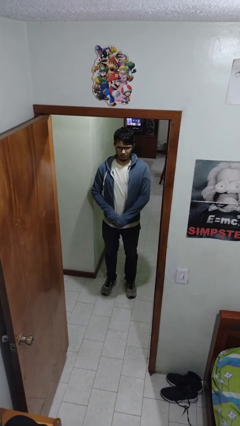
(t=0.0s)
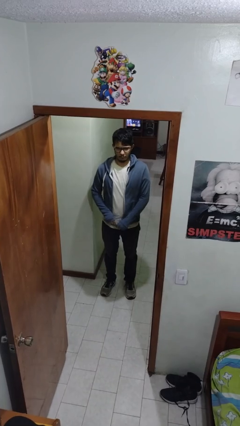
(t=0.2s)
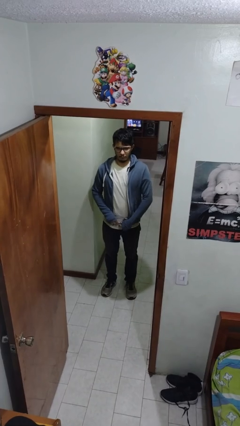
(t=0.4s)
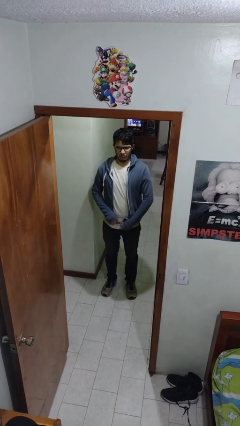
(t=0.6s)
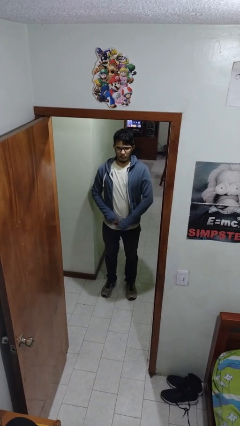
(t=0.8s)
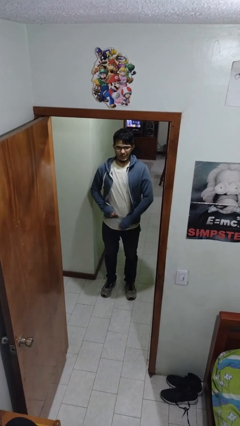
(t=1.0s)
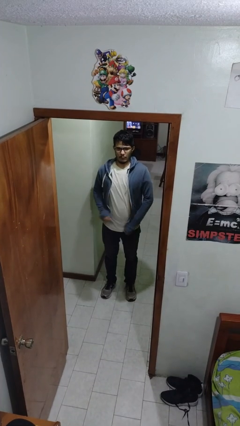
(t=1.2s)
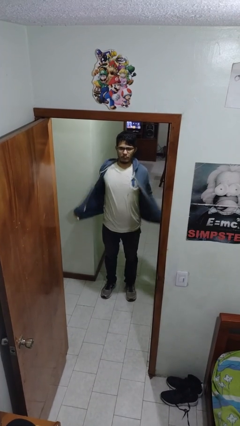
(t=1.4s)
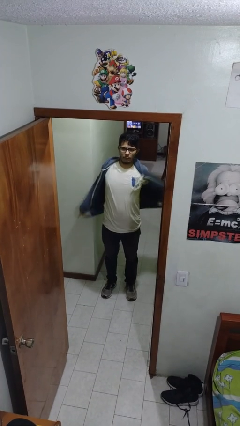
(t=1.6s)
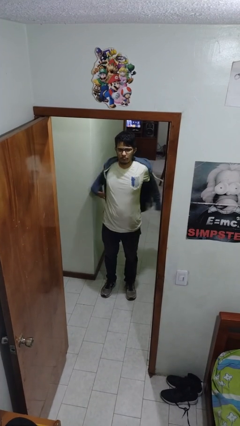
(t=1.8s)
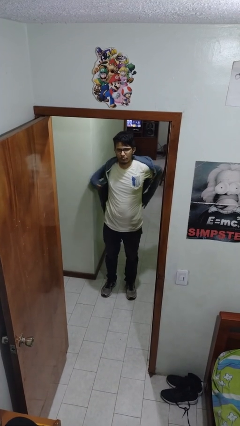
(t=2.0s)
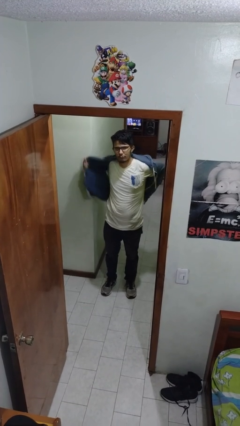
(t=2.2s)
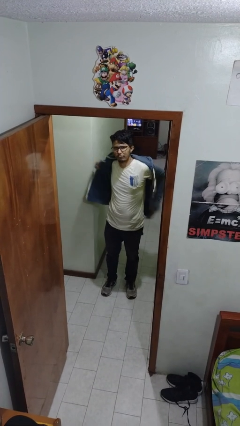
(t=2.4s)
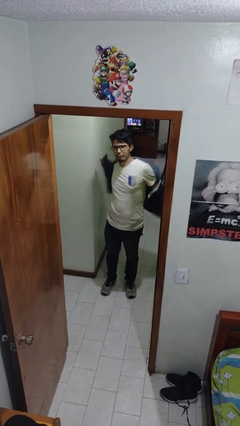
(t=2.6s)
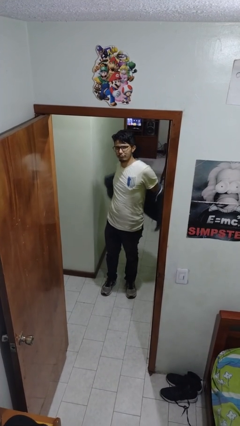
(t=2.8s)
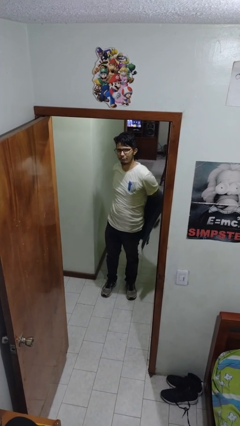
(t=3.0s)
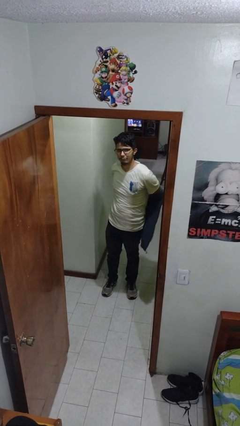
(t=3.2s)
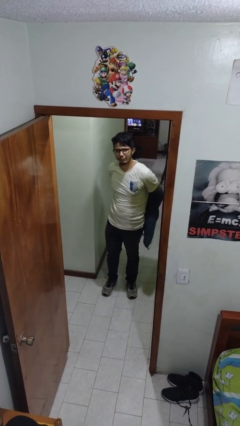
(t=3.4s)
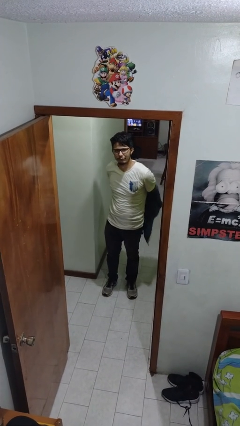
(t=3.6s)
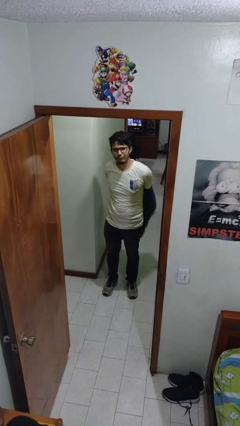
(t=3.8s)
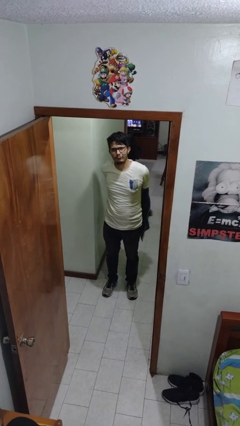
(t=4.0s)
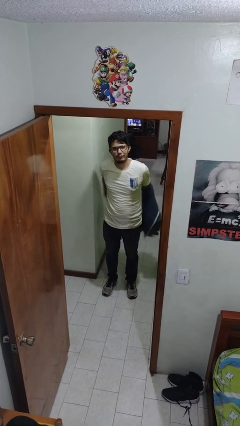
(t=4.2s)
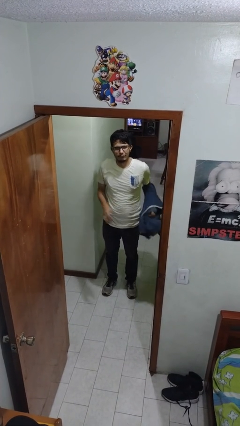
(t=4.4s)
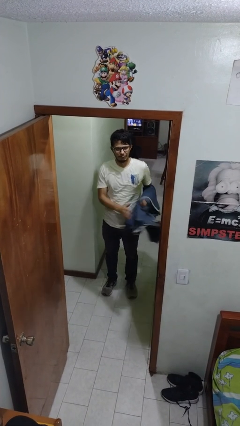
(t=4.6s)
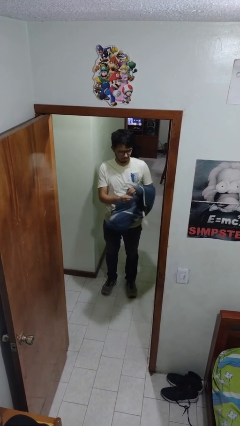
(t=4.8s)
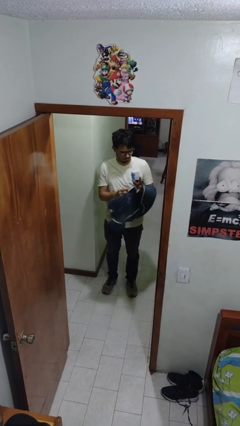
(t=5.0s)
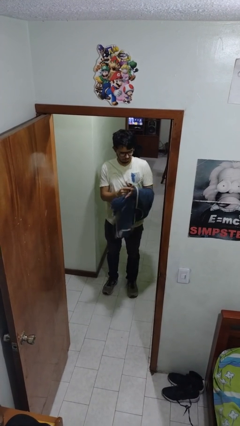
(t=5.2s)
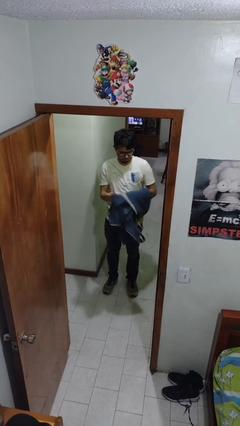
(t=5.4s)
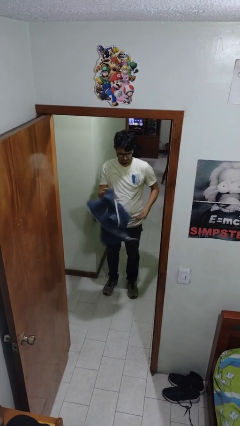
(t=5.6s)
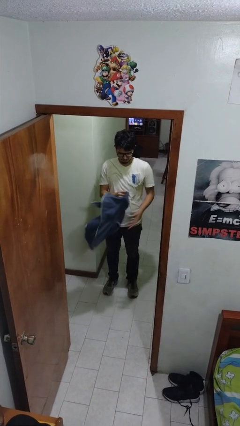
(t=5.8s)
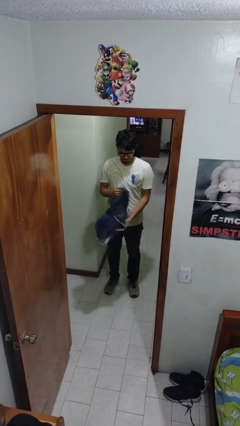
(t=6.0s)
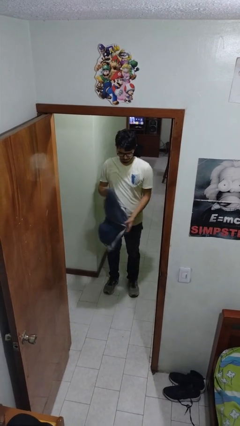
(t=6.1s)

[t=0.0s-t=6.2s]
person takes off jacket

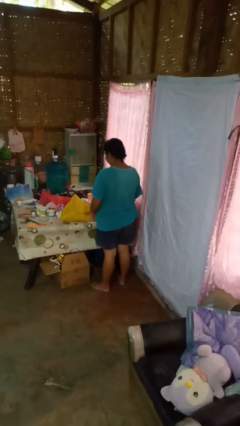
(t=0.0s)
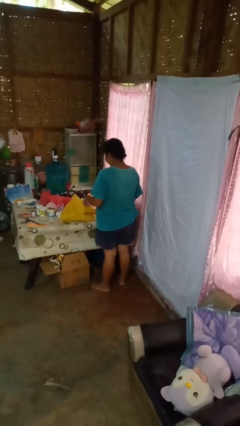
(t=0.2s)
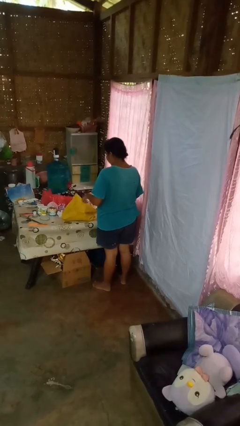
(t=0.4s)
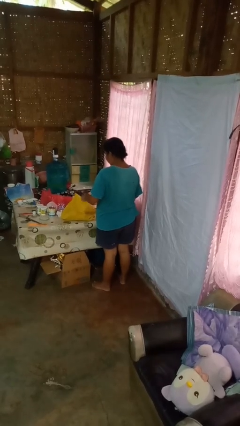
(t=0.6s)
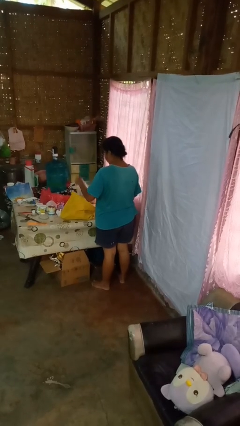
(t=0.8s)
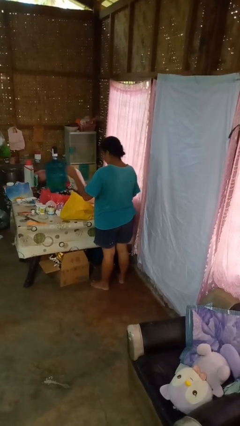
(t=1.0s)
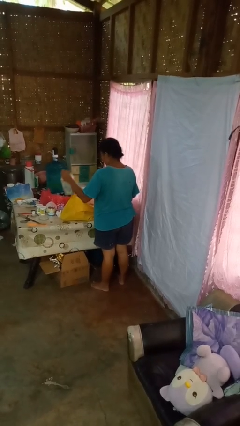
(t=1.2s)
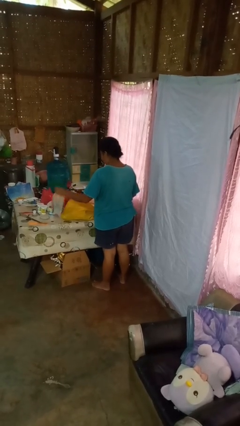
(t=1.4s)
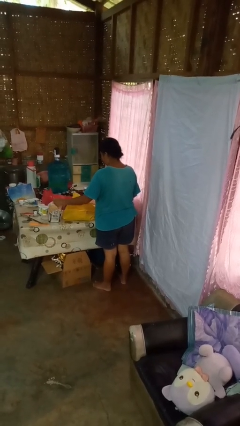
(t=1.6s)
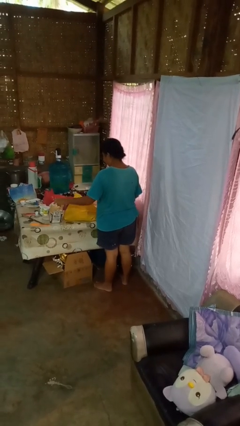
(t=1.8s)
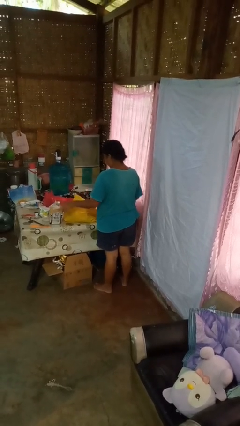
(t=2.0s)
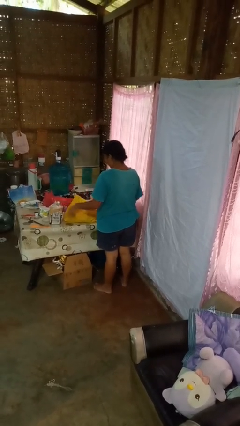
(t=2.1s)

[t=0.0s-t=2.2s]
person takes object from bag

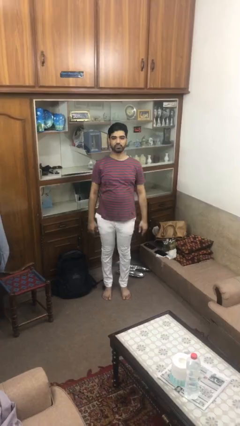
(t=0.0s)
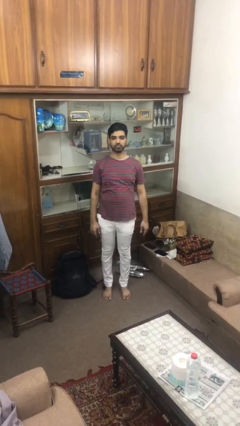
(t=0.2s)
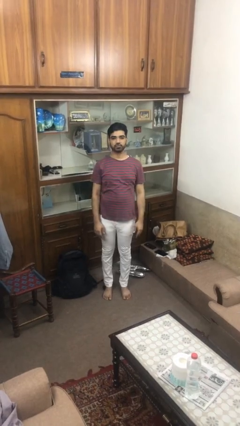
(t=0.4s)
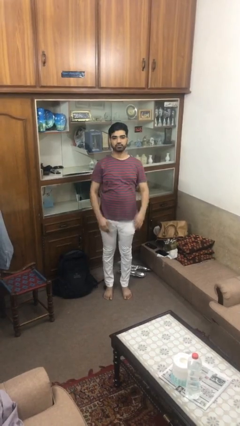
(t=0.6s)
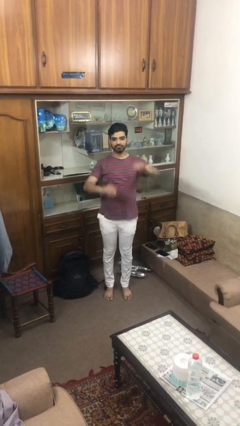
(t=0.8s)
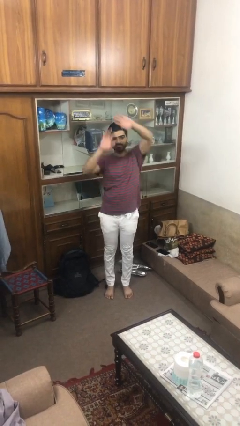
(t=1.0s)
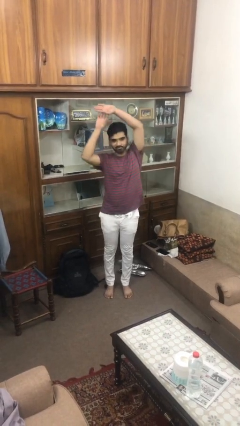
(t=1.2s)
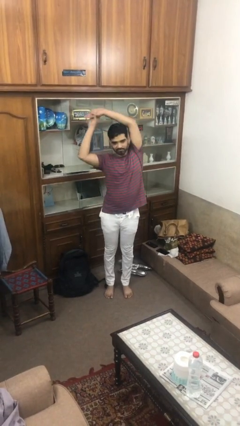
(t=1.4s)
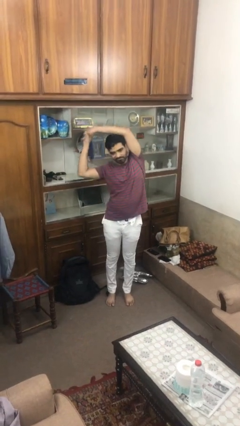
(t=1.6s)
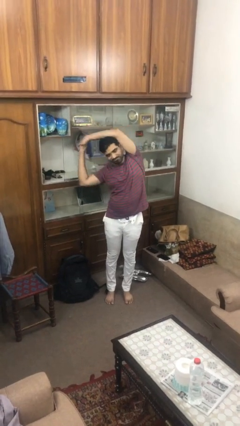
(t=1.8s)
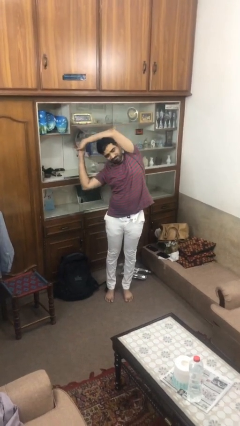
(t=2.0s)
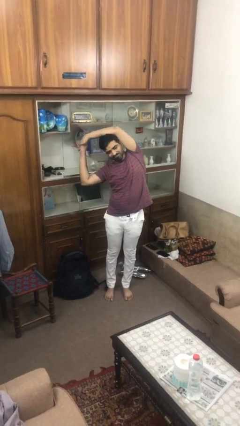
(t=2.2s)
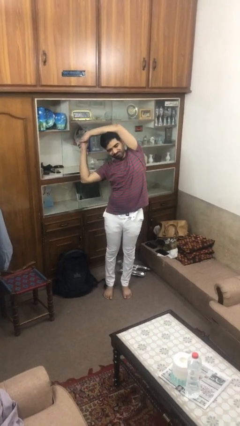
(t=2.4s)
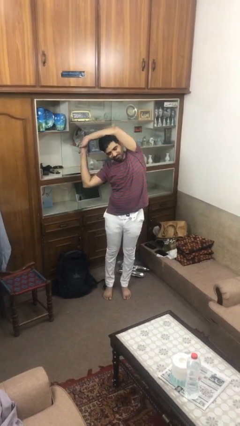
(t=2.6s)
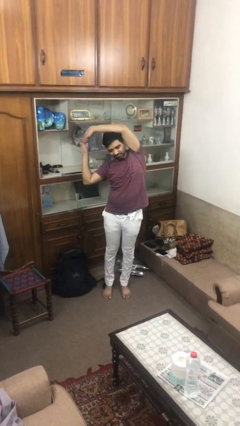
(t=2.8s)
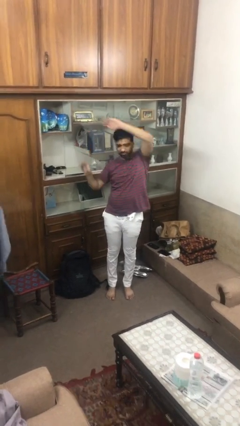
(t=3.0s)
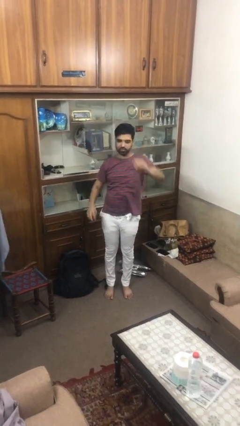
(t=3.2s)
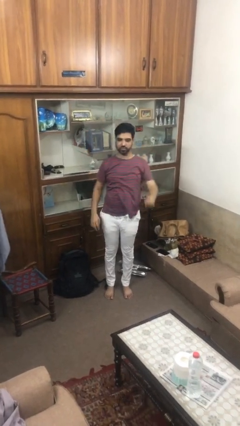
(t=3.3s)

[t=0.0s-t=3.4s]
person stretches arms over head

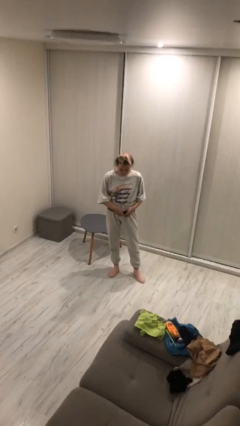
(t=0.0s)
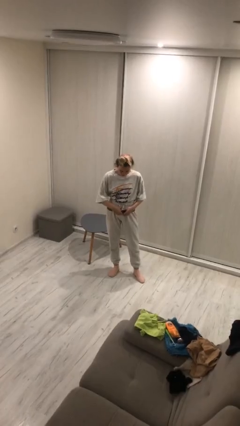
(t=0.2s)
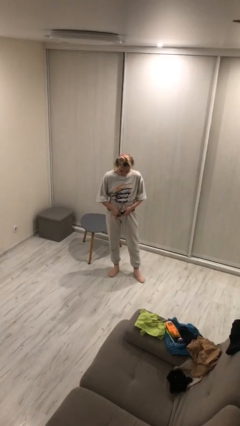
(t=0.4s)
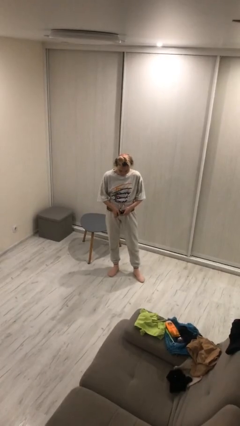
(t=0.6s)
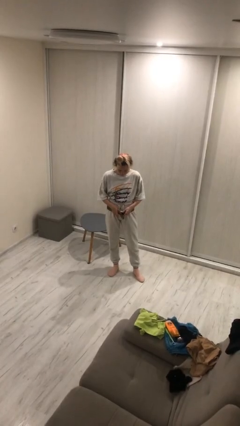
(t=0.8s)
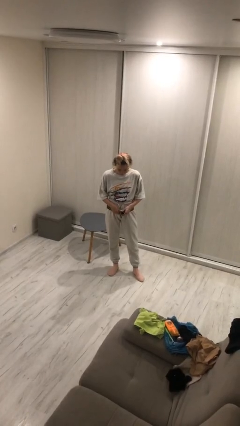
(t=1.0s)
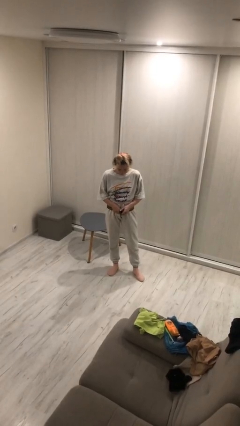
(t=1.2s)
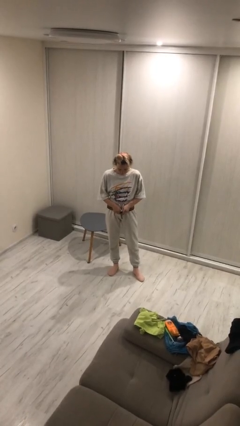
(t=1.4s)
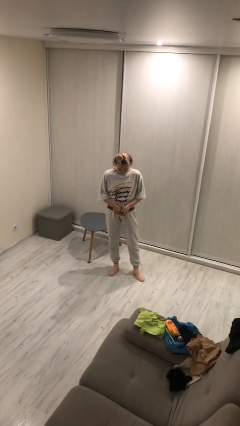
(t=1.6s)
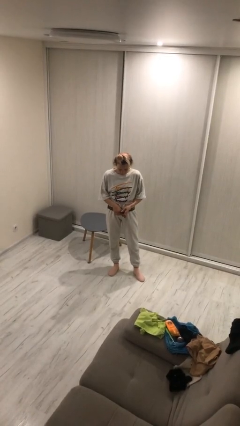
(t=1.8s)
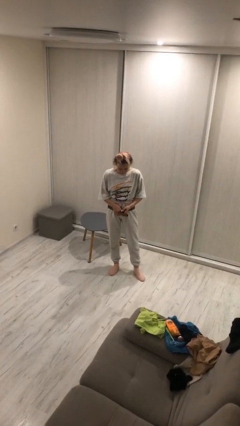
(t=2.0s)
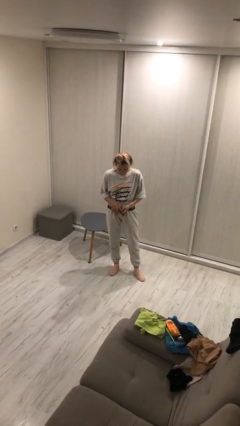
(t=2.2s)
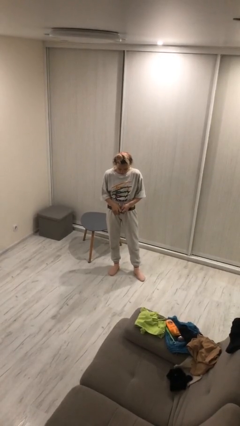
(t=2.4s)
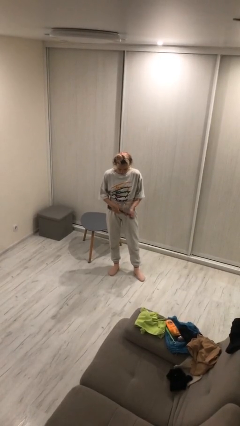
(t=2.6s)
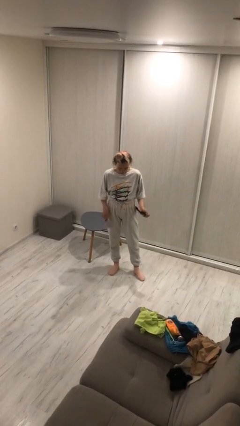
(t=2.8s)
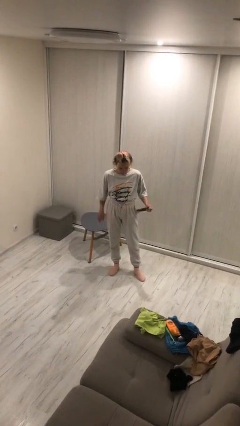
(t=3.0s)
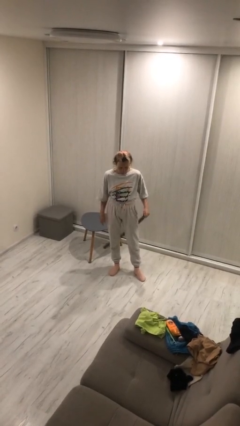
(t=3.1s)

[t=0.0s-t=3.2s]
person takes off belt

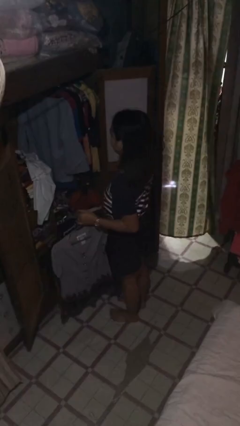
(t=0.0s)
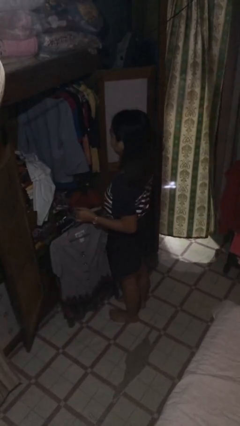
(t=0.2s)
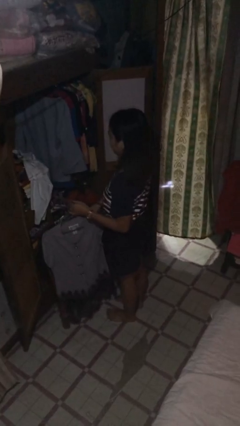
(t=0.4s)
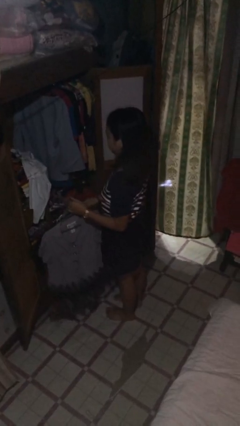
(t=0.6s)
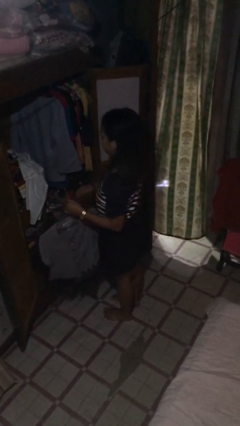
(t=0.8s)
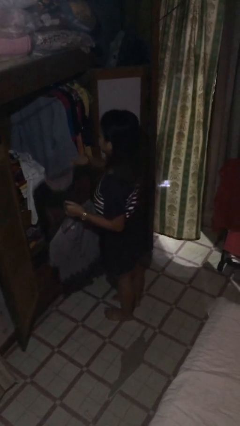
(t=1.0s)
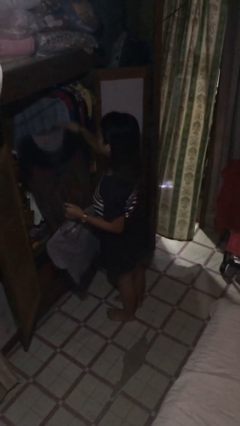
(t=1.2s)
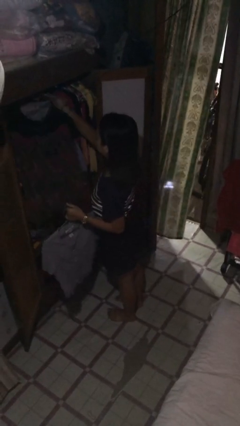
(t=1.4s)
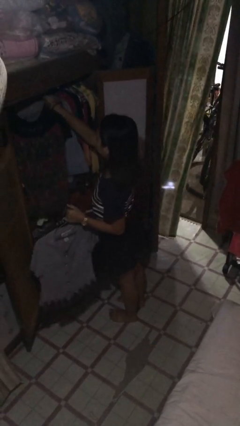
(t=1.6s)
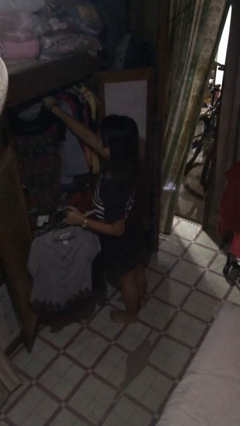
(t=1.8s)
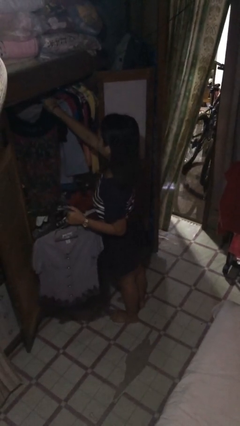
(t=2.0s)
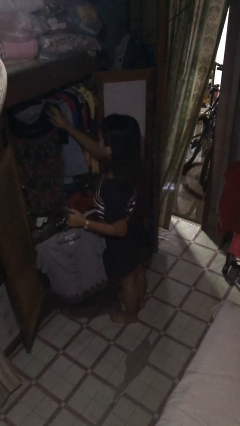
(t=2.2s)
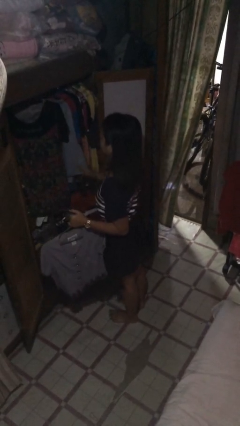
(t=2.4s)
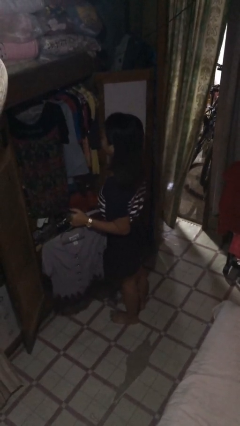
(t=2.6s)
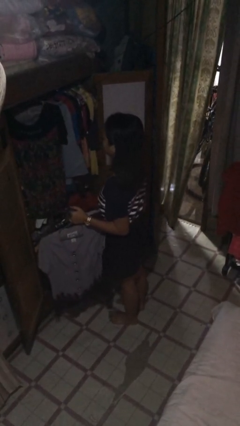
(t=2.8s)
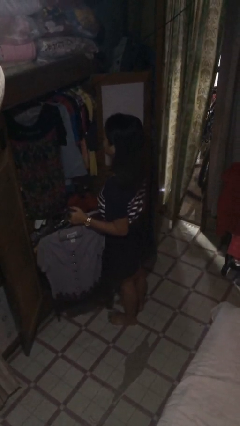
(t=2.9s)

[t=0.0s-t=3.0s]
person puts clothes into closet
